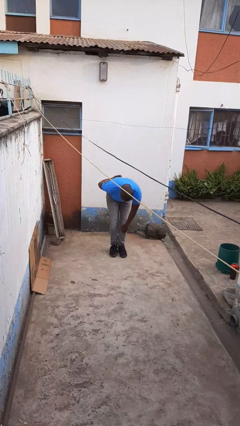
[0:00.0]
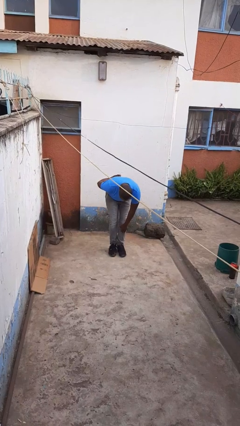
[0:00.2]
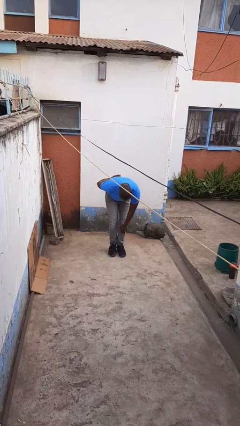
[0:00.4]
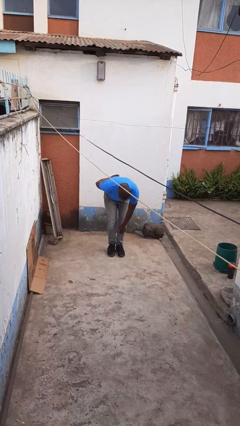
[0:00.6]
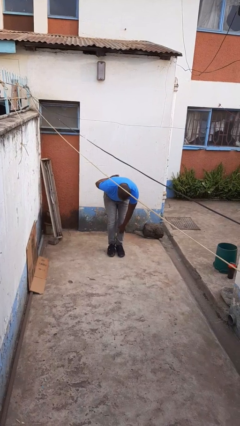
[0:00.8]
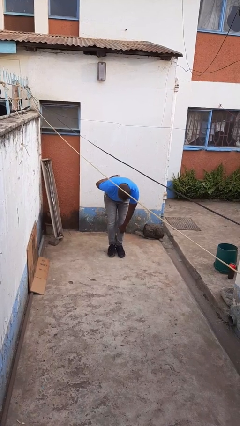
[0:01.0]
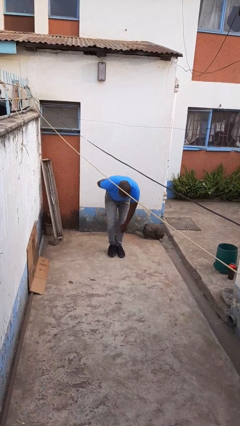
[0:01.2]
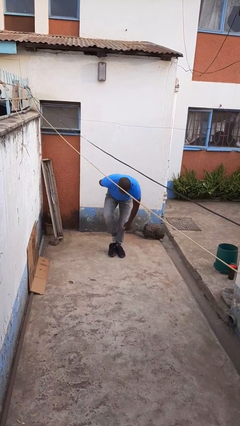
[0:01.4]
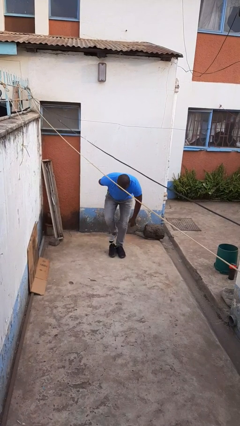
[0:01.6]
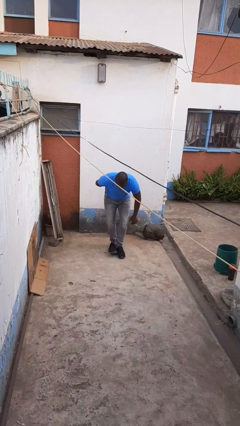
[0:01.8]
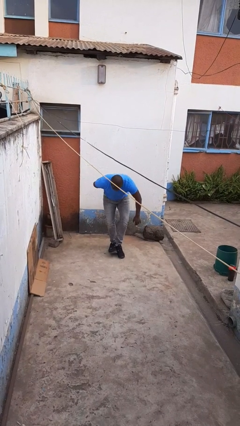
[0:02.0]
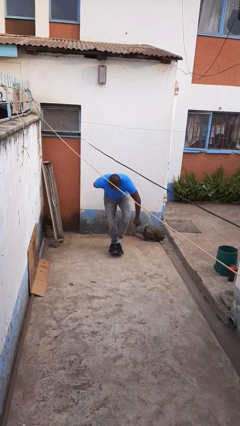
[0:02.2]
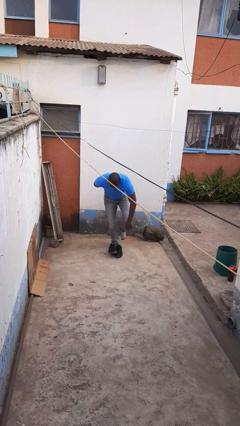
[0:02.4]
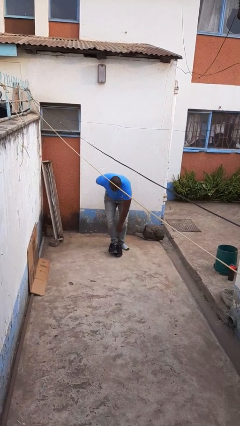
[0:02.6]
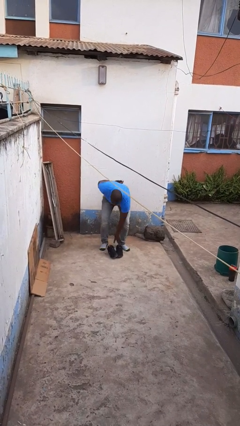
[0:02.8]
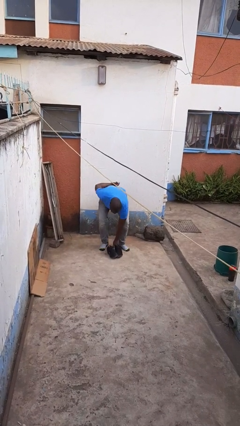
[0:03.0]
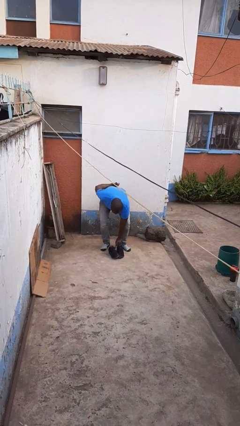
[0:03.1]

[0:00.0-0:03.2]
person takes off shoes

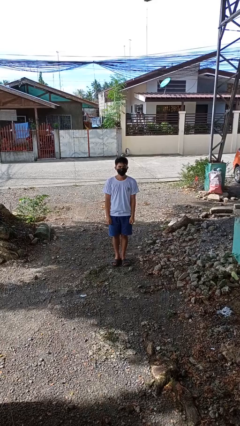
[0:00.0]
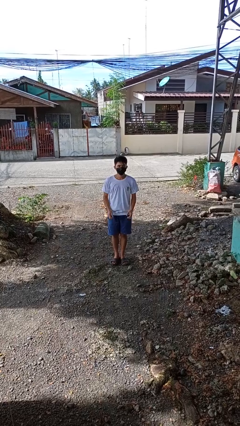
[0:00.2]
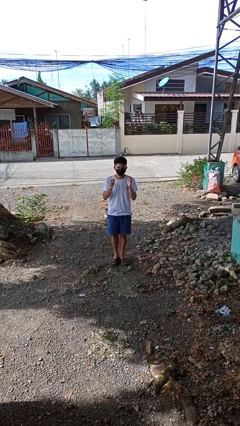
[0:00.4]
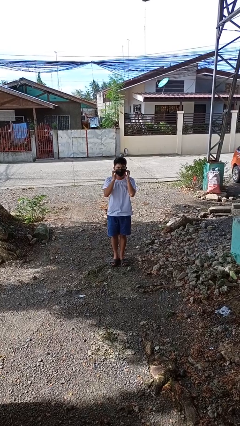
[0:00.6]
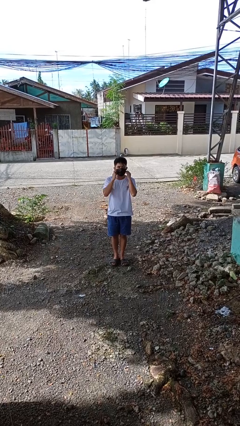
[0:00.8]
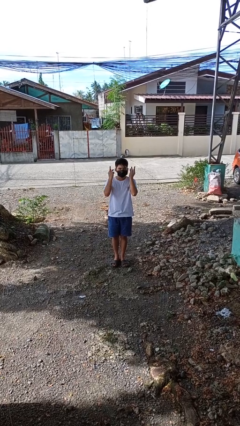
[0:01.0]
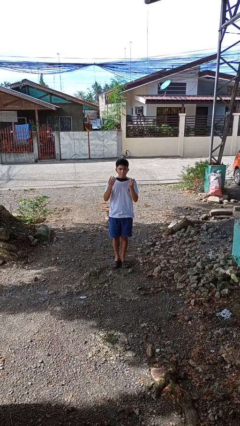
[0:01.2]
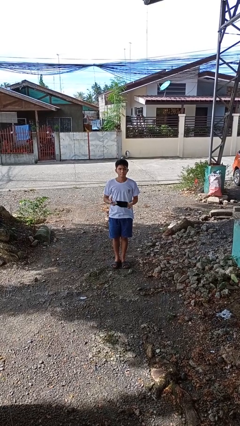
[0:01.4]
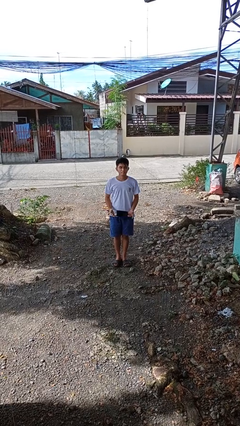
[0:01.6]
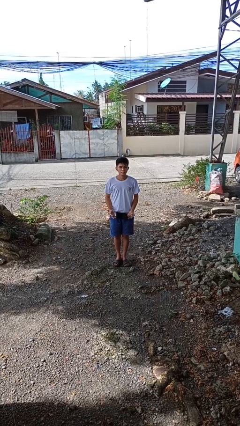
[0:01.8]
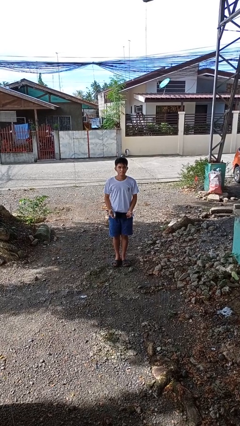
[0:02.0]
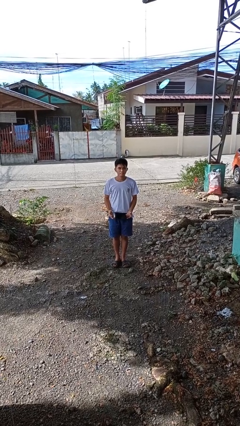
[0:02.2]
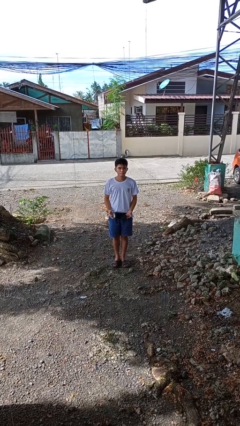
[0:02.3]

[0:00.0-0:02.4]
person takes off facemask

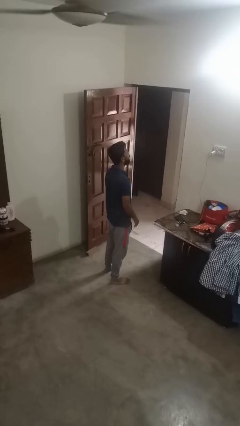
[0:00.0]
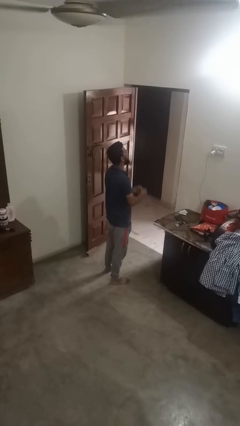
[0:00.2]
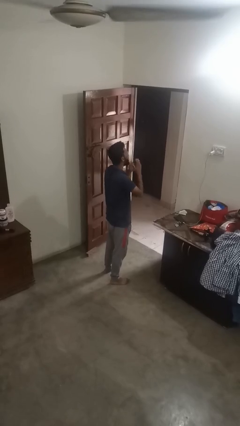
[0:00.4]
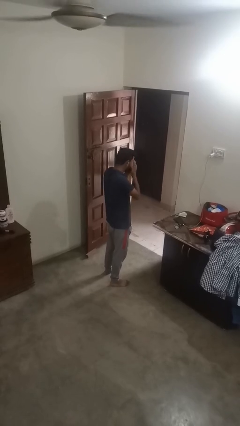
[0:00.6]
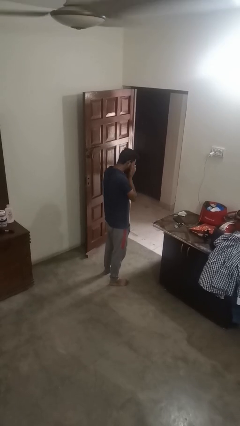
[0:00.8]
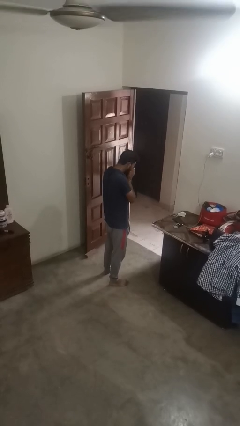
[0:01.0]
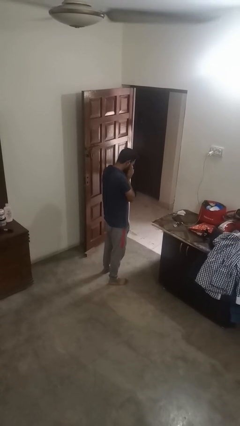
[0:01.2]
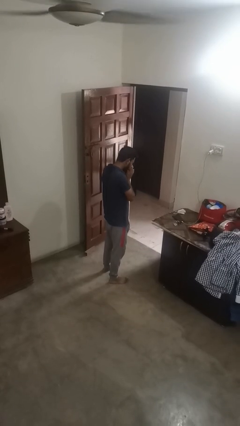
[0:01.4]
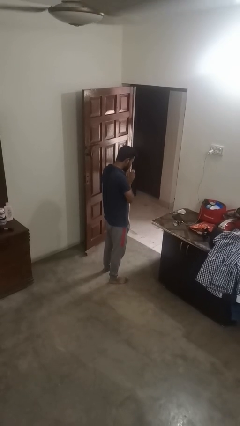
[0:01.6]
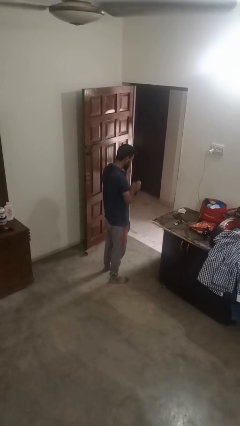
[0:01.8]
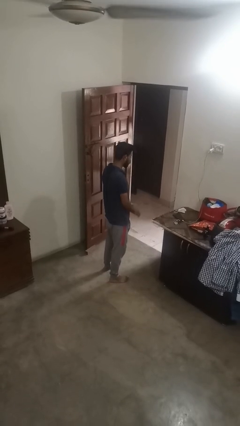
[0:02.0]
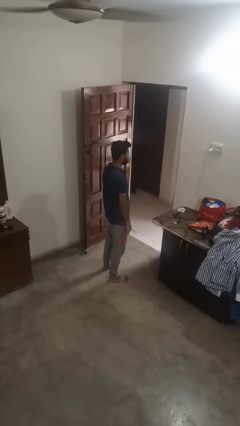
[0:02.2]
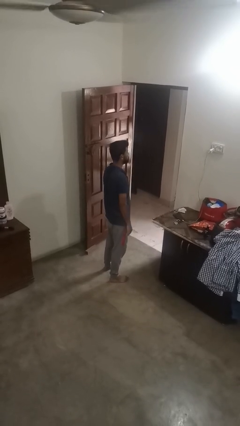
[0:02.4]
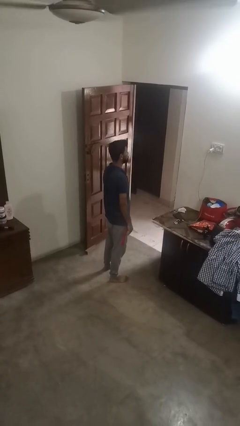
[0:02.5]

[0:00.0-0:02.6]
person sneezes into hand

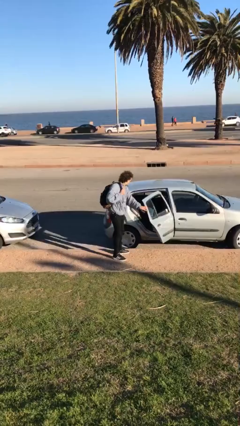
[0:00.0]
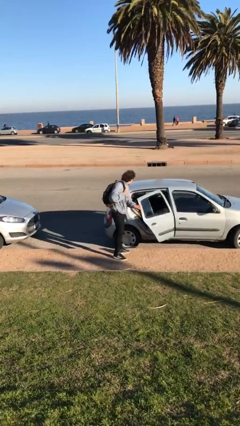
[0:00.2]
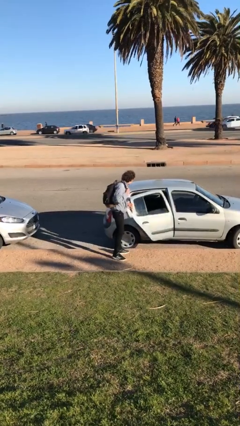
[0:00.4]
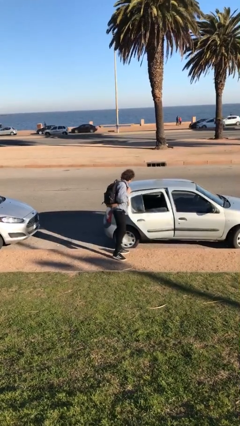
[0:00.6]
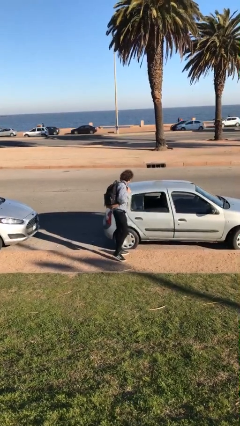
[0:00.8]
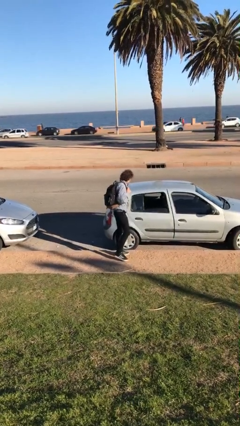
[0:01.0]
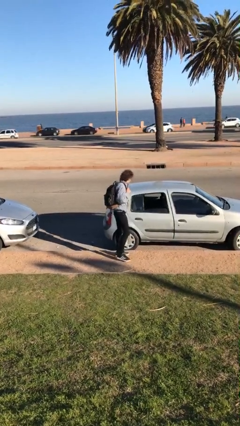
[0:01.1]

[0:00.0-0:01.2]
person closes car door

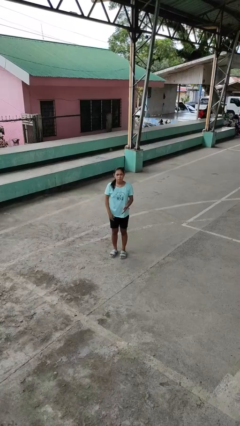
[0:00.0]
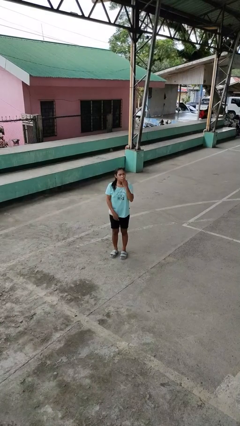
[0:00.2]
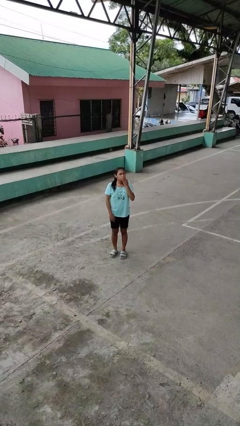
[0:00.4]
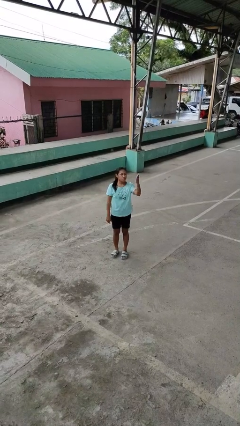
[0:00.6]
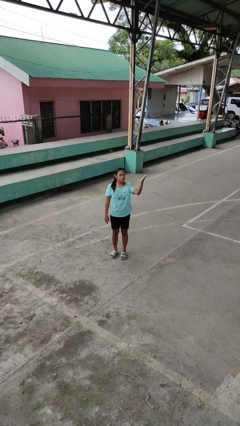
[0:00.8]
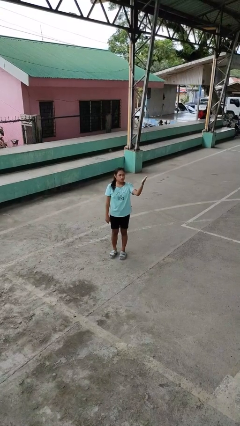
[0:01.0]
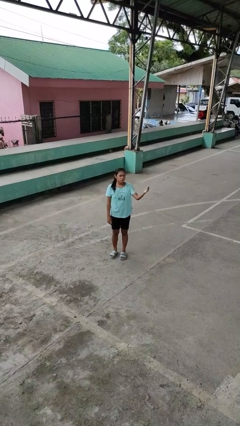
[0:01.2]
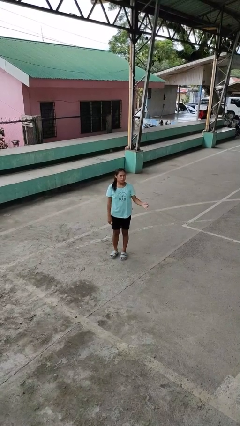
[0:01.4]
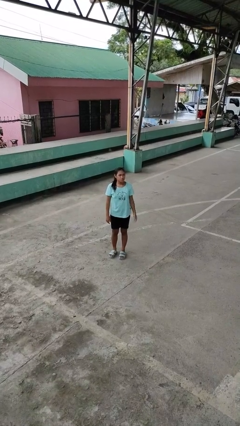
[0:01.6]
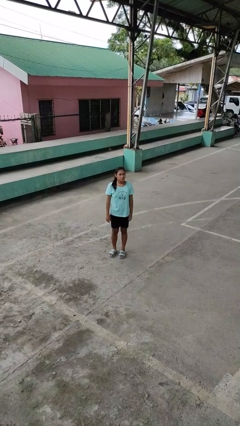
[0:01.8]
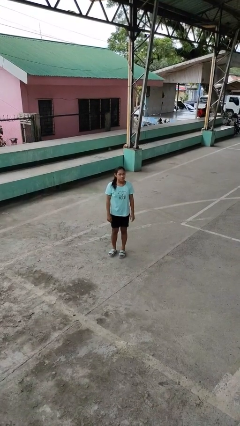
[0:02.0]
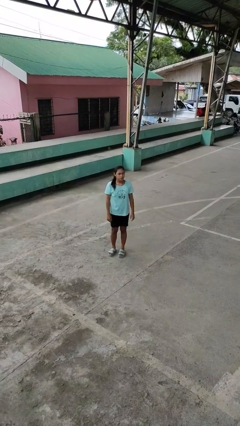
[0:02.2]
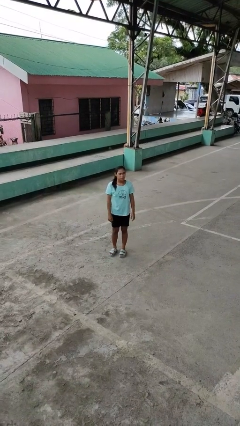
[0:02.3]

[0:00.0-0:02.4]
person gestures blow kiss

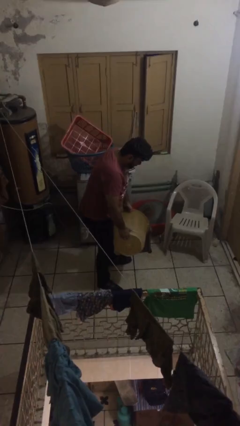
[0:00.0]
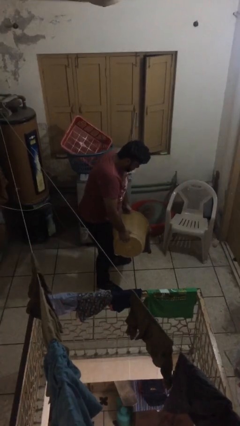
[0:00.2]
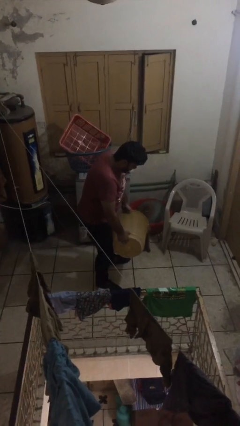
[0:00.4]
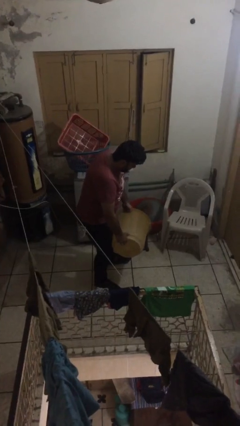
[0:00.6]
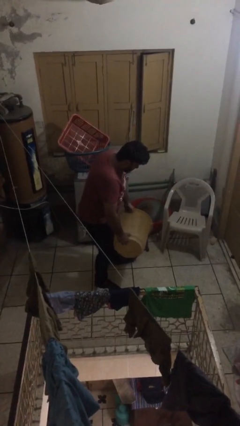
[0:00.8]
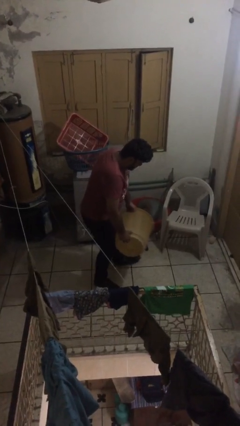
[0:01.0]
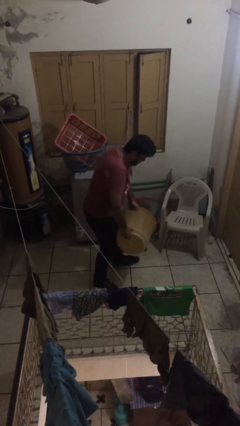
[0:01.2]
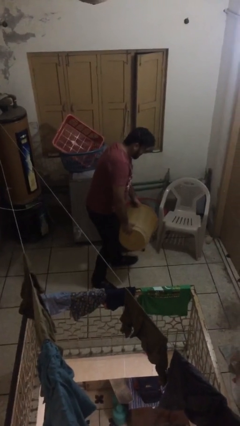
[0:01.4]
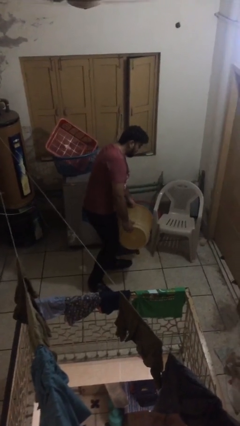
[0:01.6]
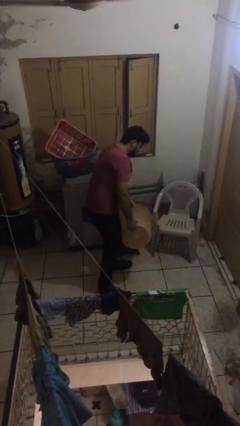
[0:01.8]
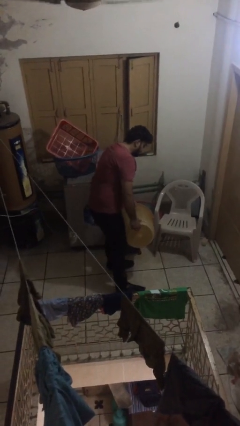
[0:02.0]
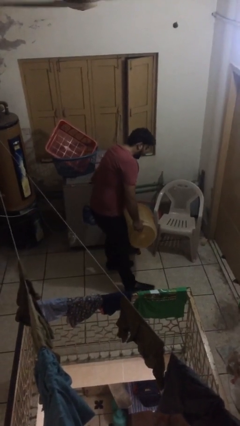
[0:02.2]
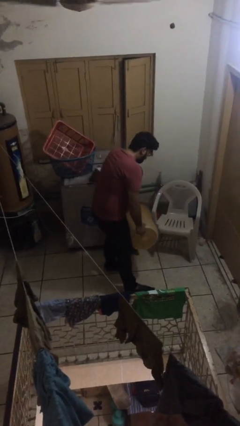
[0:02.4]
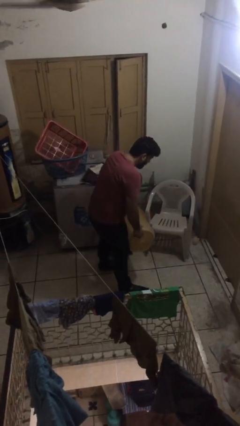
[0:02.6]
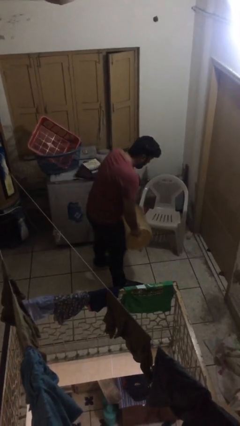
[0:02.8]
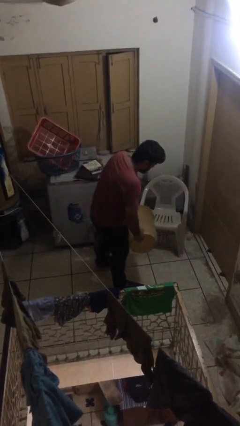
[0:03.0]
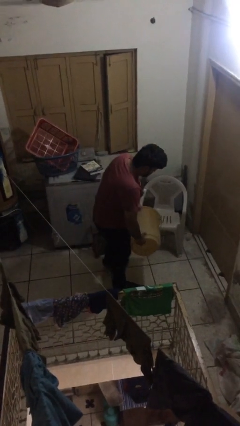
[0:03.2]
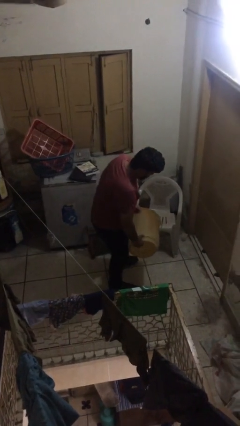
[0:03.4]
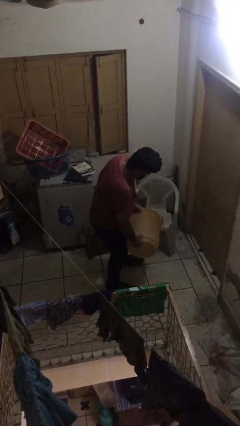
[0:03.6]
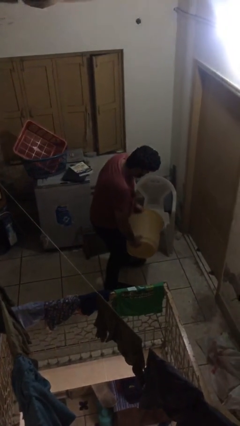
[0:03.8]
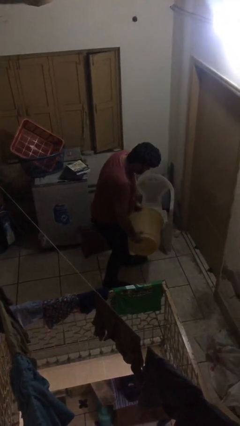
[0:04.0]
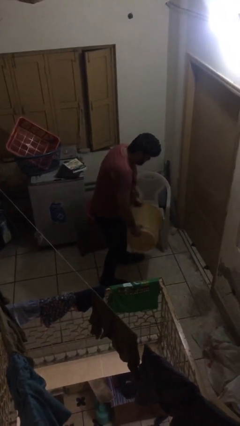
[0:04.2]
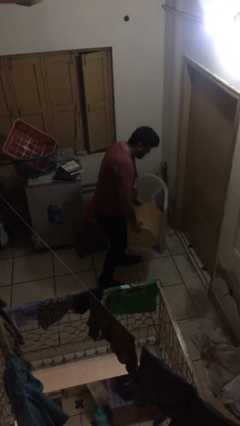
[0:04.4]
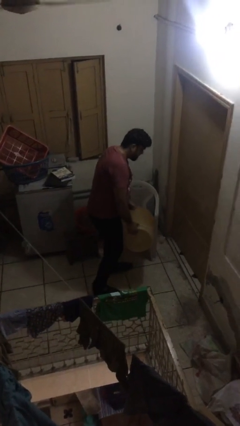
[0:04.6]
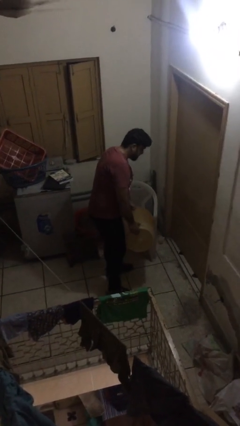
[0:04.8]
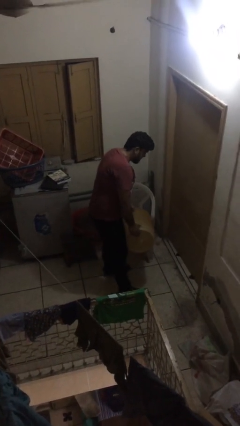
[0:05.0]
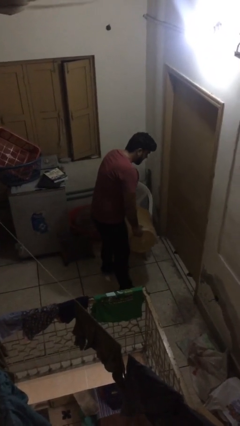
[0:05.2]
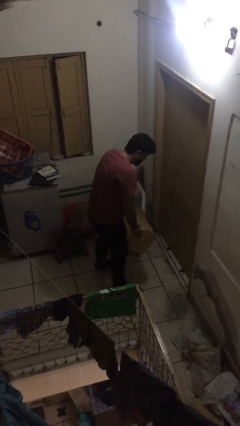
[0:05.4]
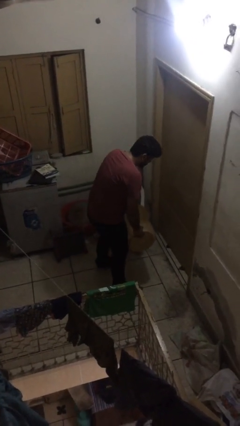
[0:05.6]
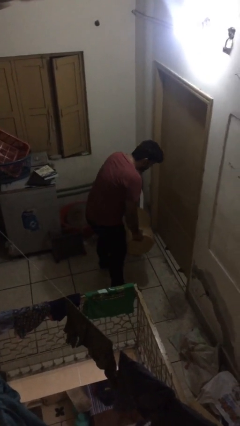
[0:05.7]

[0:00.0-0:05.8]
person carries heavy object
